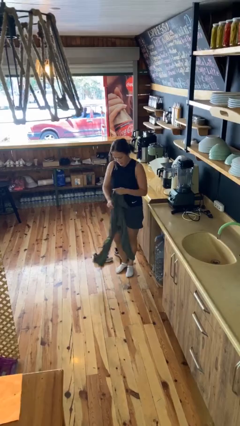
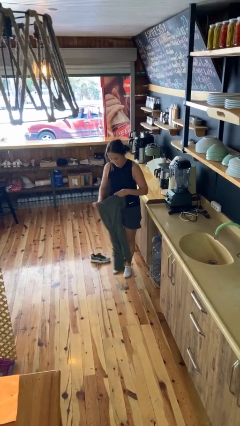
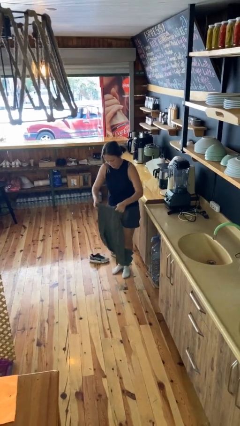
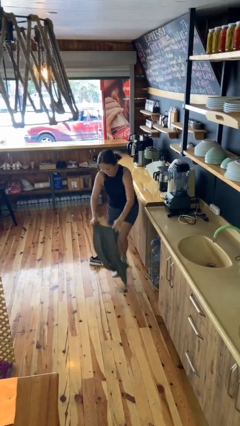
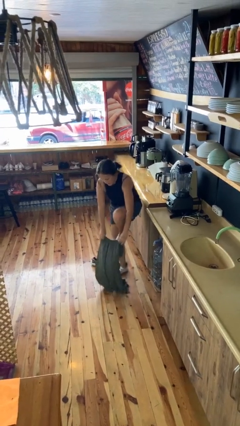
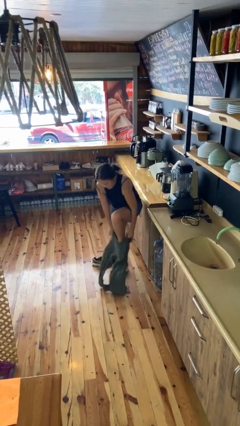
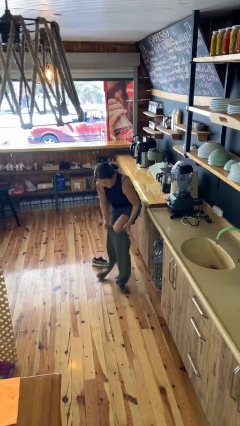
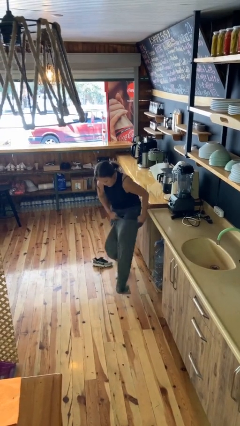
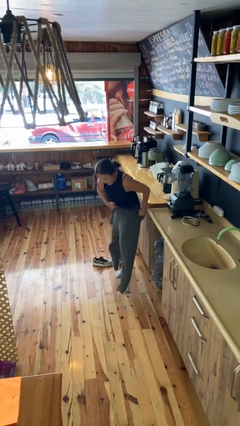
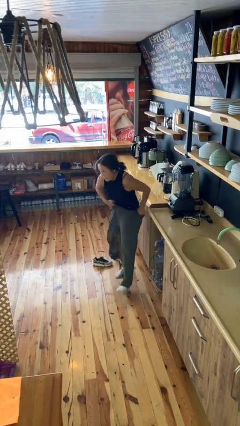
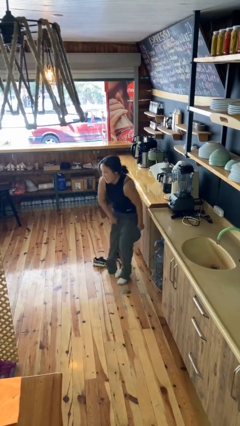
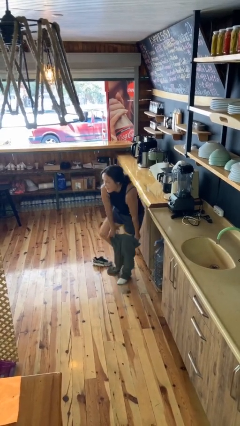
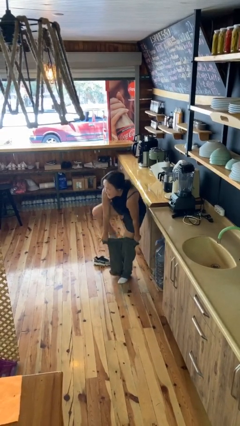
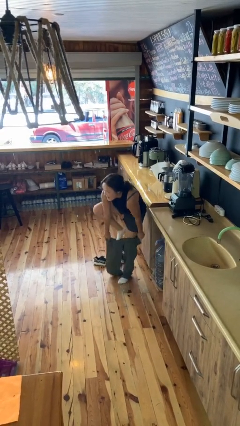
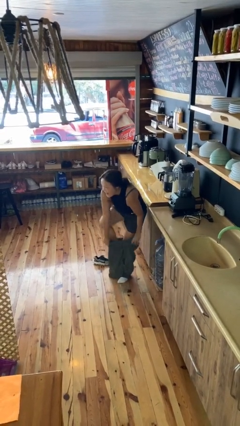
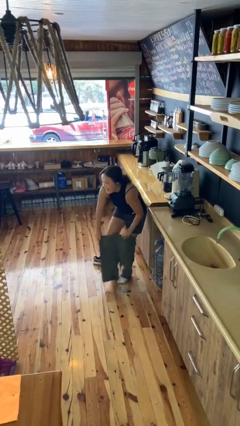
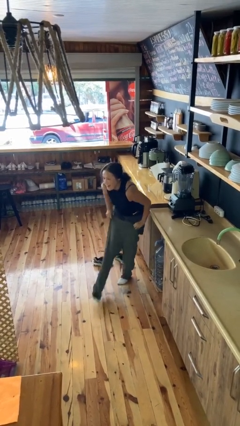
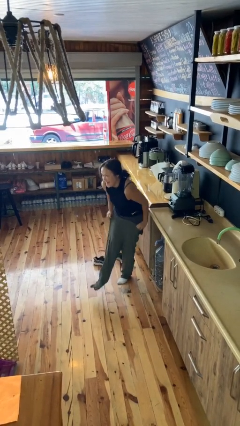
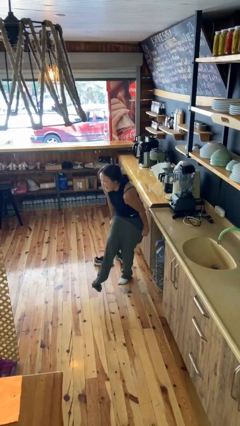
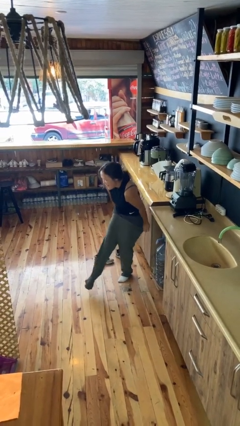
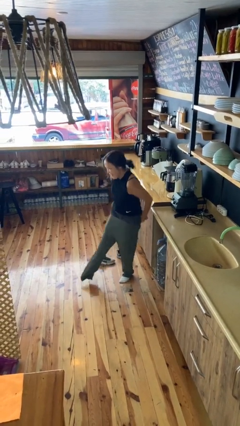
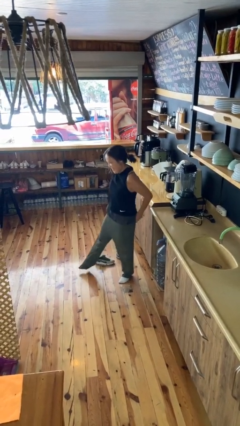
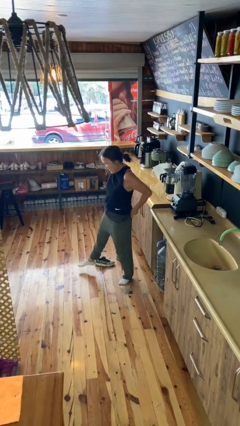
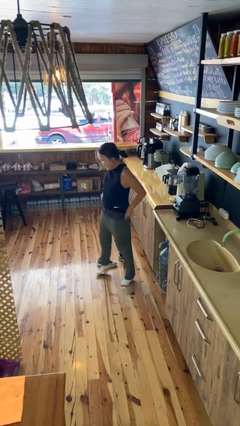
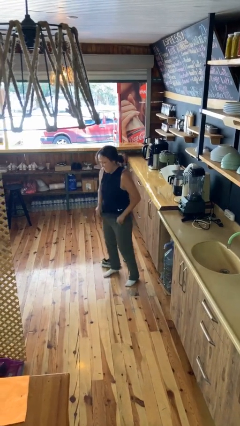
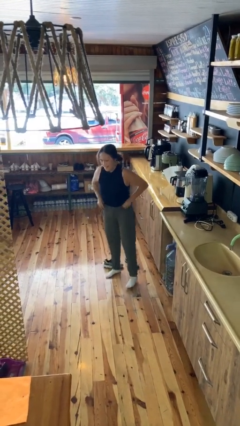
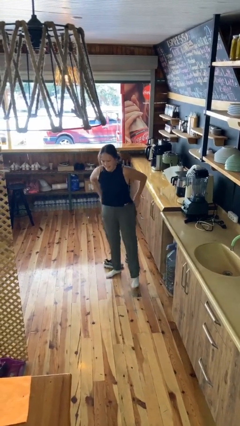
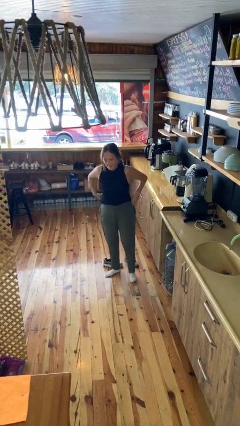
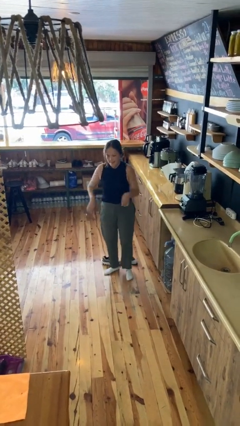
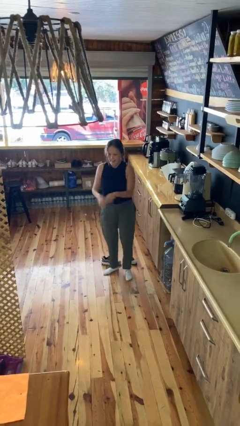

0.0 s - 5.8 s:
person puts on pants

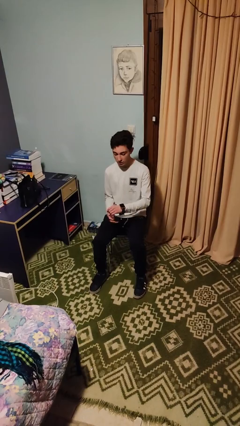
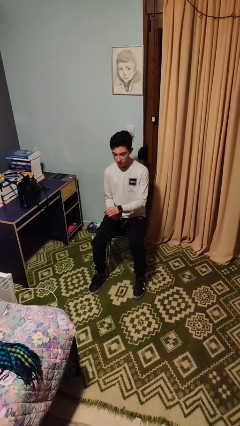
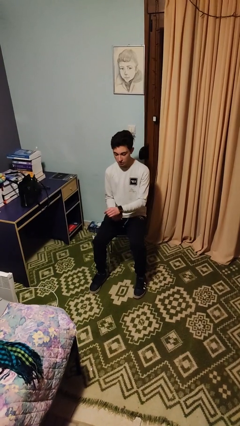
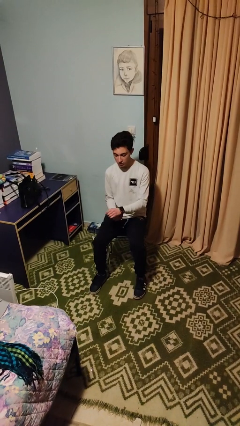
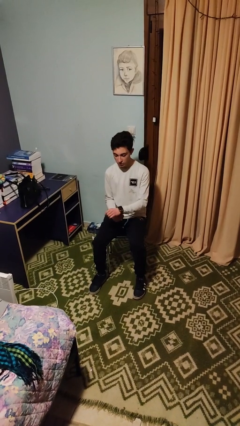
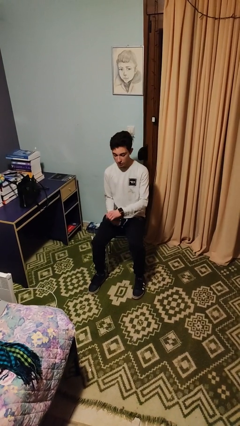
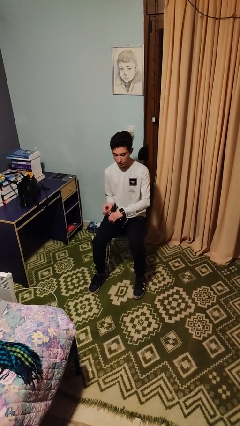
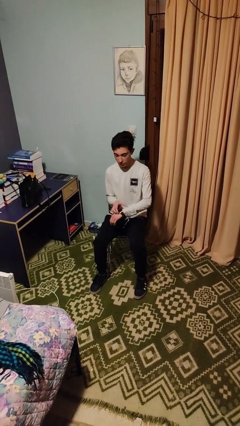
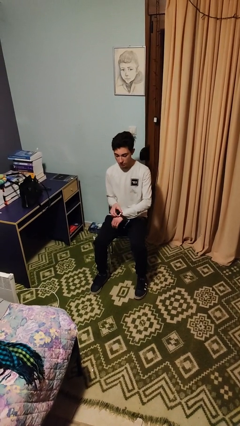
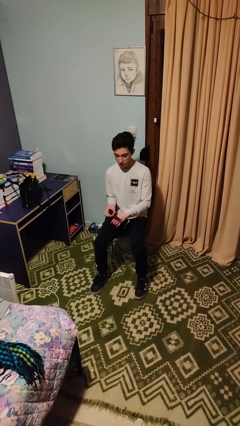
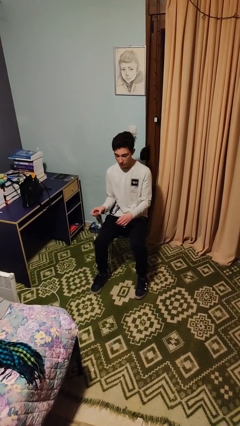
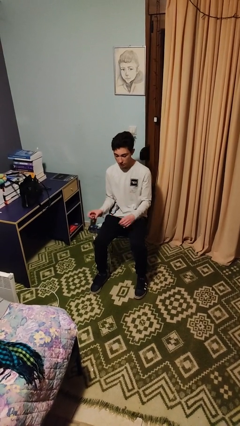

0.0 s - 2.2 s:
person takes off wristwatch

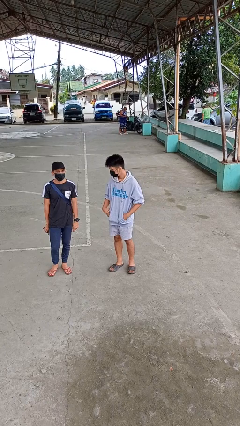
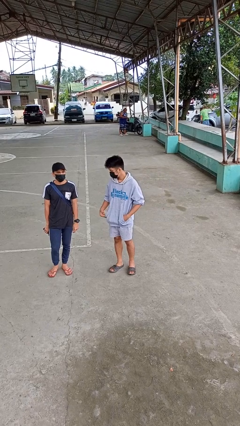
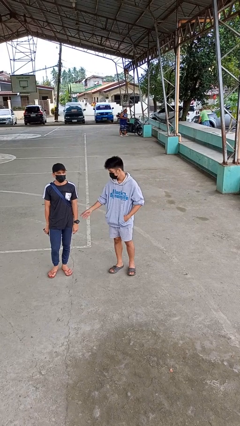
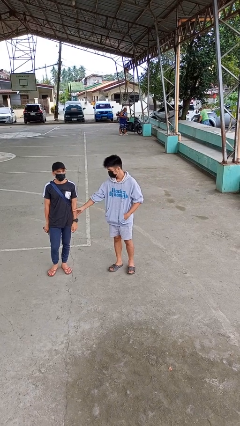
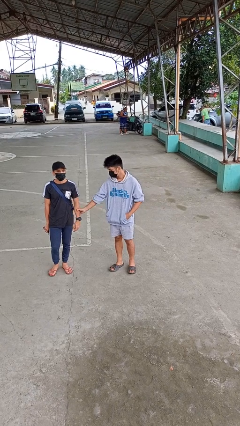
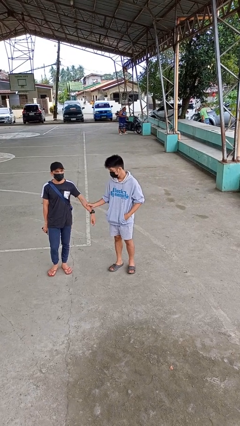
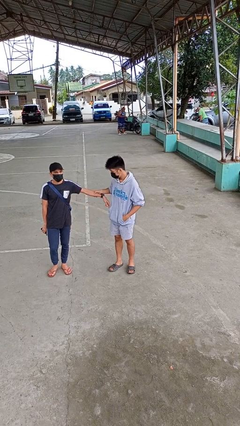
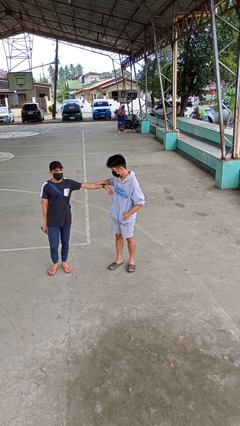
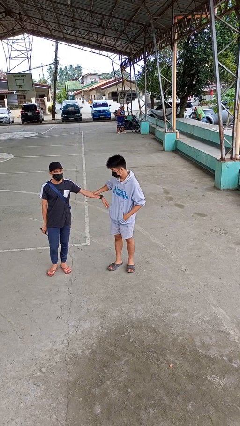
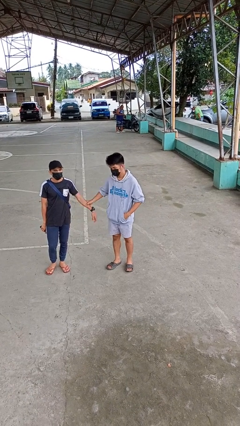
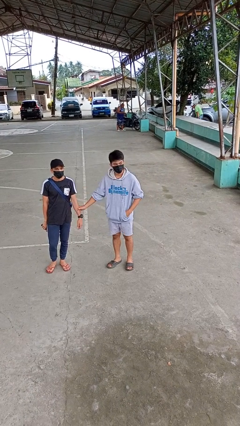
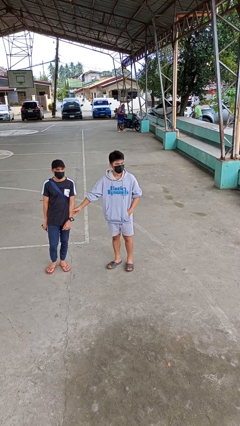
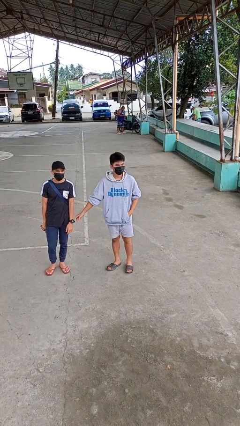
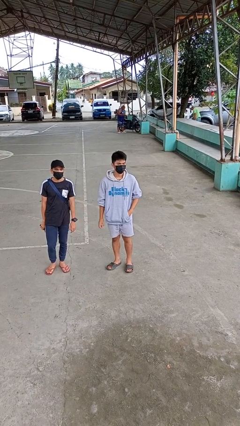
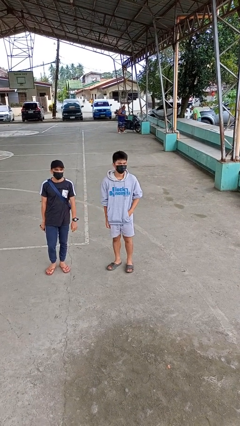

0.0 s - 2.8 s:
person grabs person by forearm

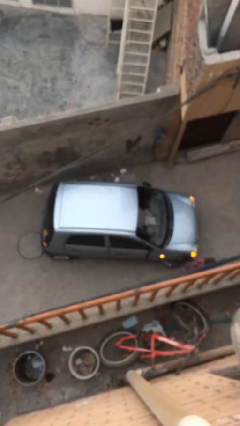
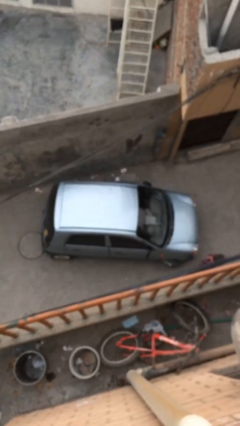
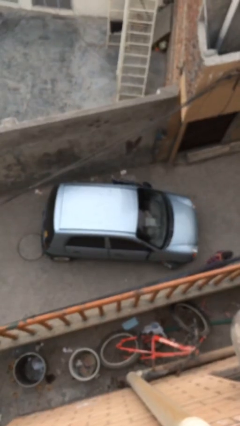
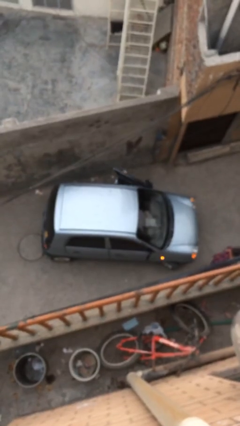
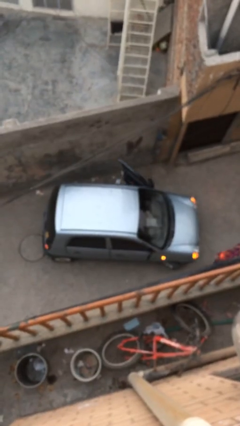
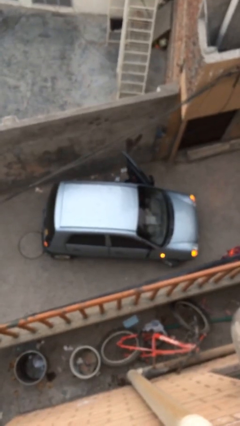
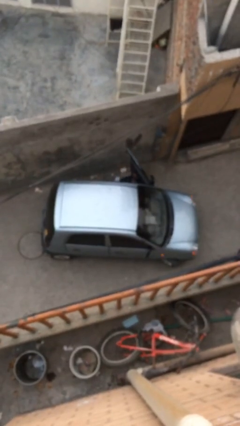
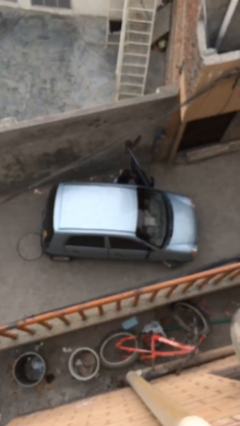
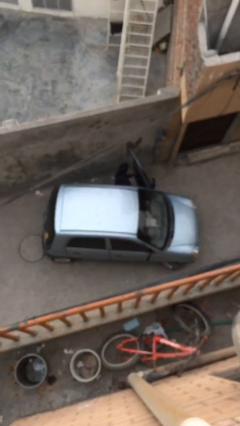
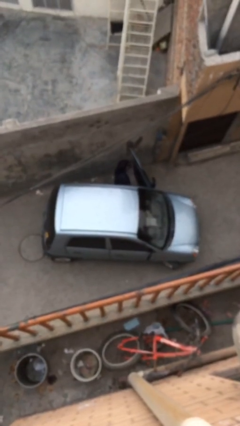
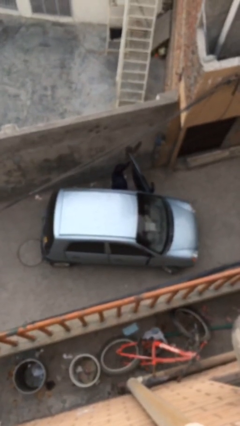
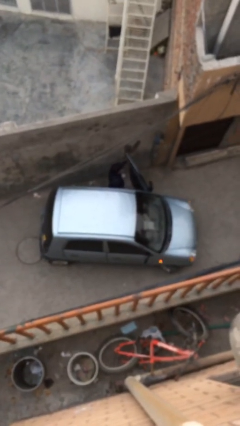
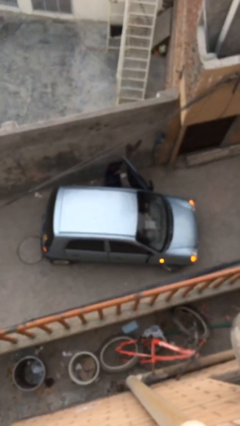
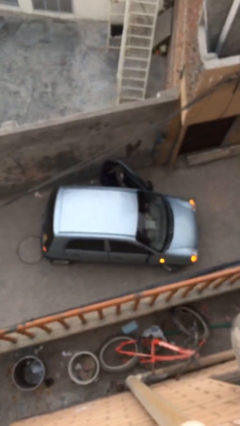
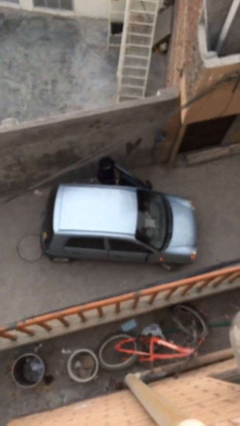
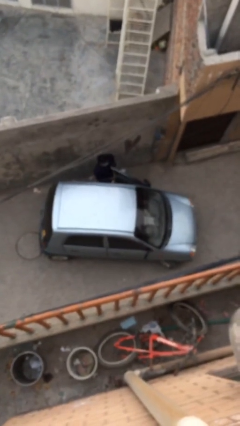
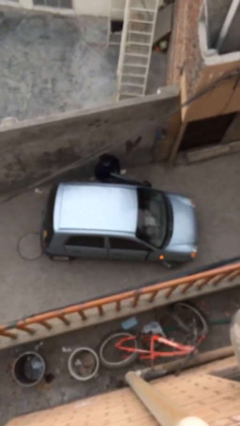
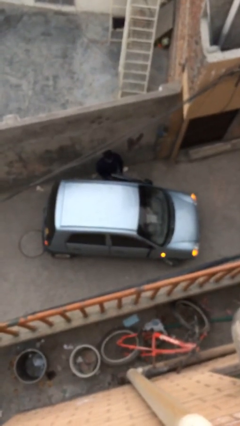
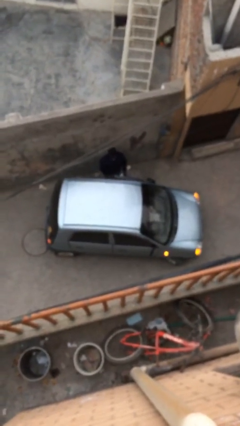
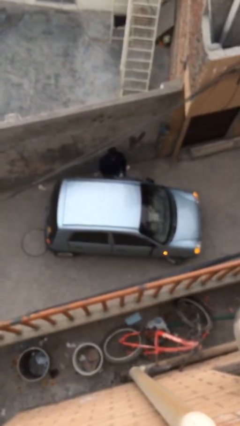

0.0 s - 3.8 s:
car drops off person

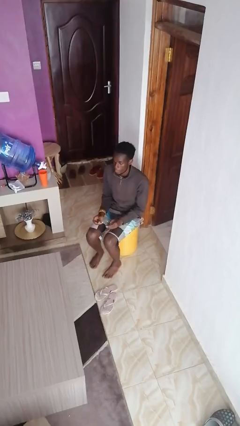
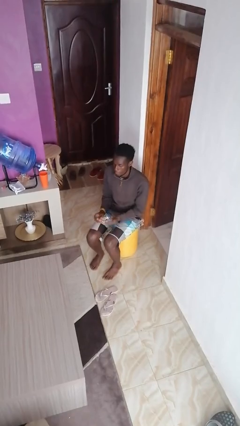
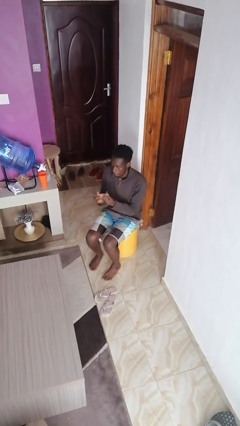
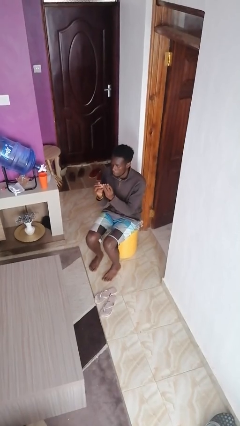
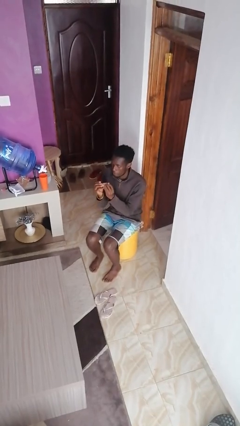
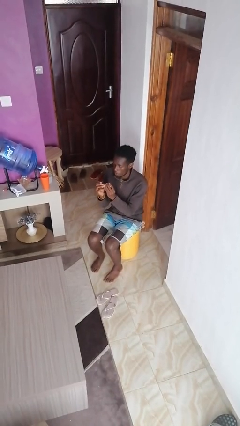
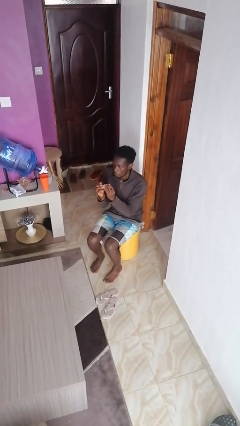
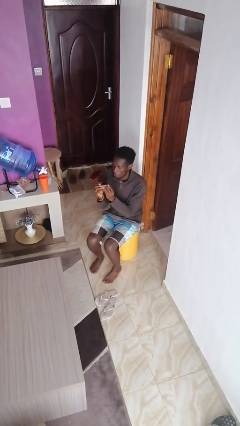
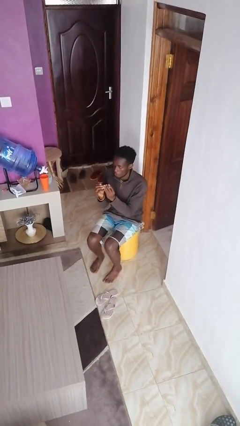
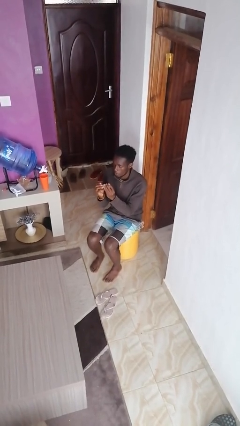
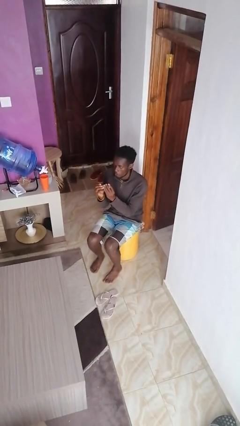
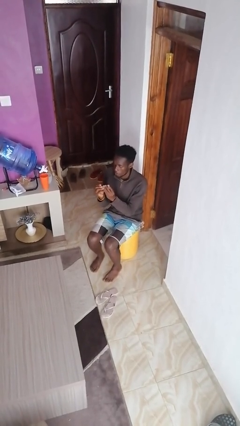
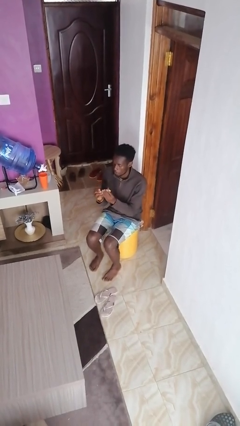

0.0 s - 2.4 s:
person clips fingernails

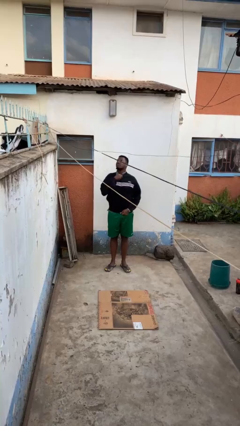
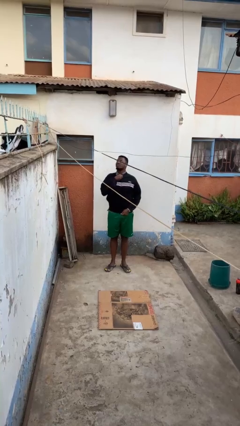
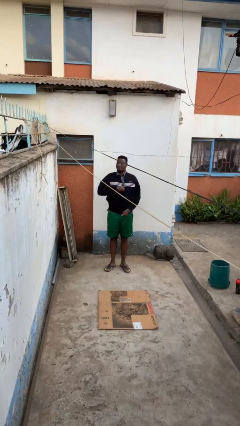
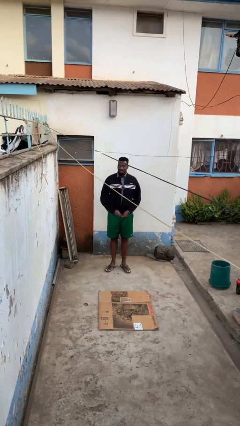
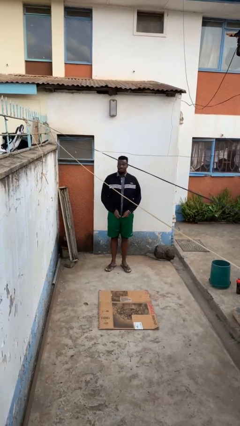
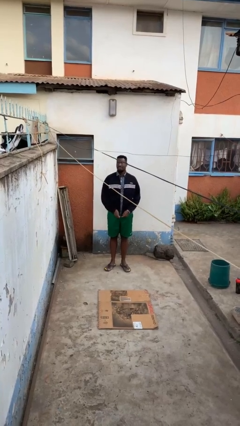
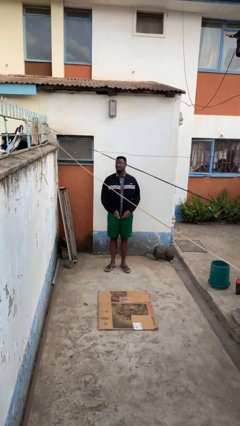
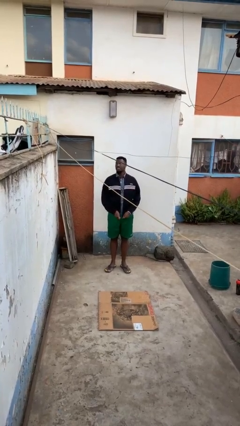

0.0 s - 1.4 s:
person unzips jacket
